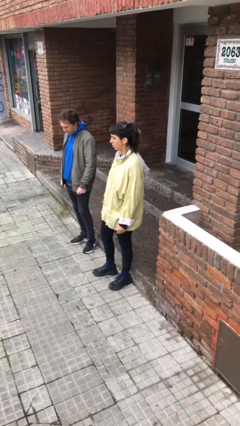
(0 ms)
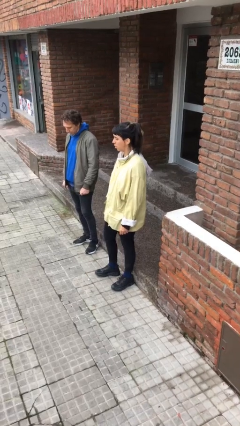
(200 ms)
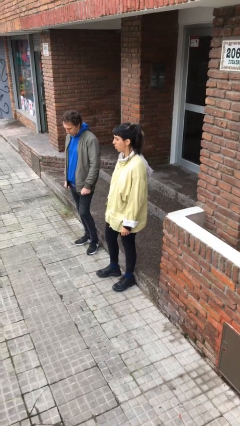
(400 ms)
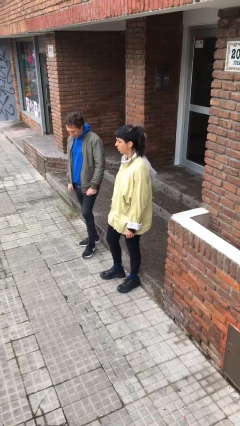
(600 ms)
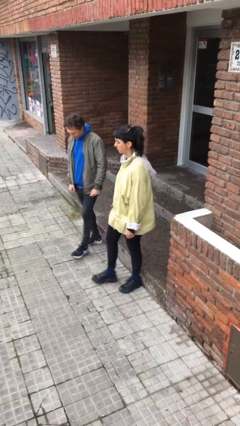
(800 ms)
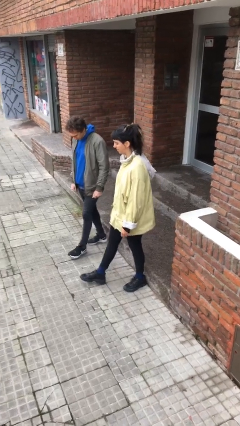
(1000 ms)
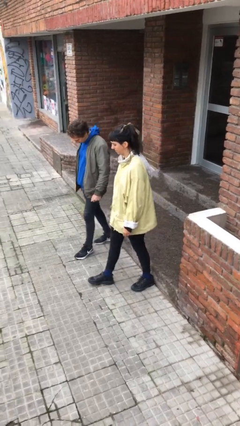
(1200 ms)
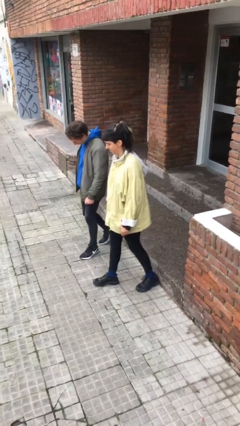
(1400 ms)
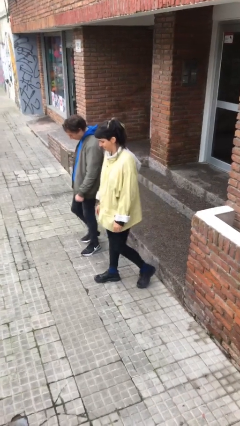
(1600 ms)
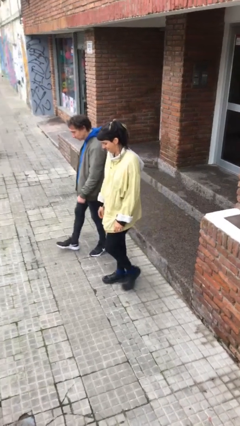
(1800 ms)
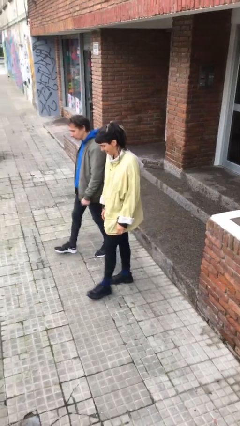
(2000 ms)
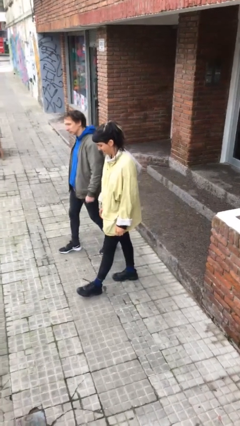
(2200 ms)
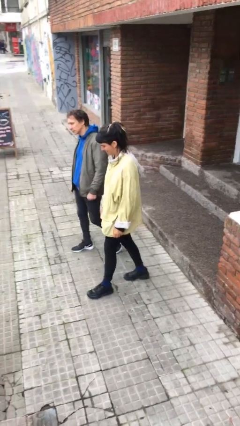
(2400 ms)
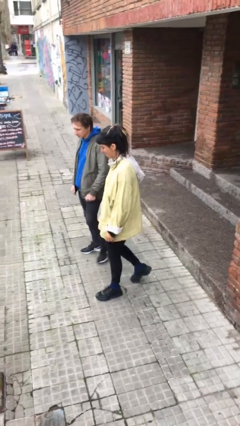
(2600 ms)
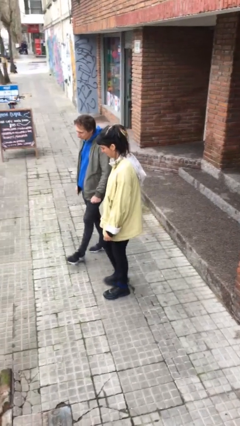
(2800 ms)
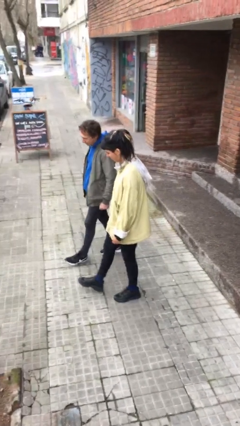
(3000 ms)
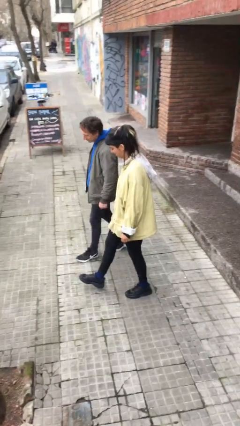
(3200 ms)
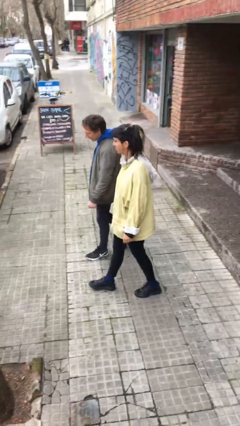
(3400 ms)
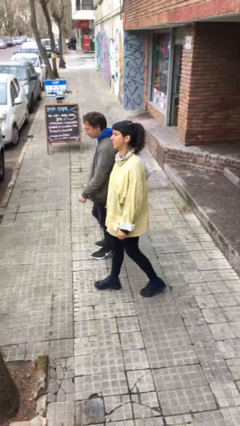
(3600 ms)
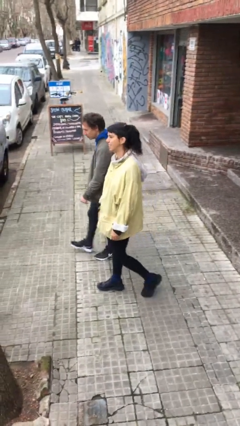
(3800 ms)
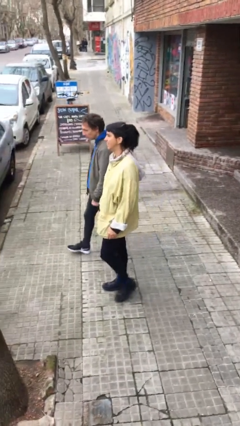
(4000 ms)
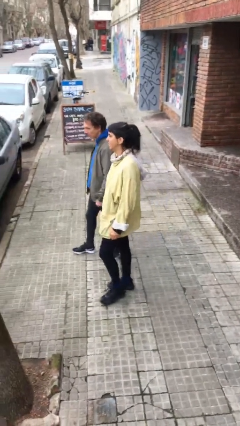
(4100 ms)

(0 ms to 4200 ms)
person talks to person

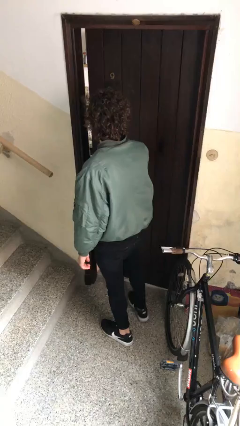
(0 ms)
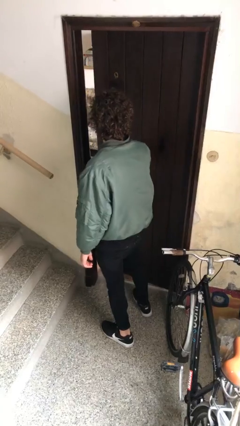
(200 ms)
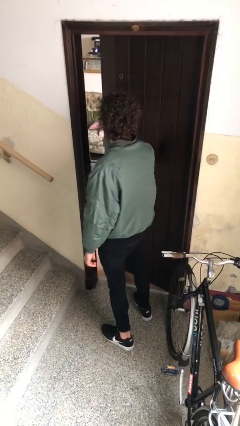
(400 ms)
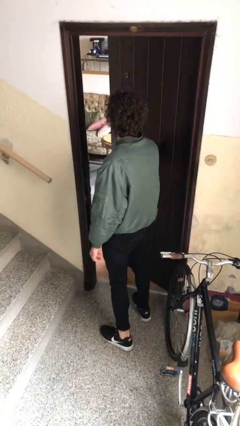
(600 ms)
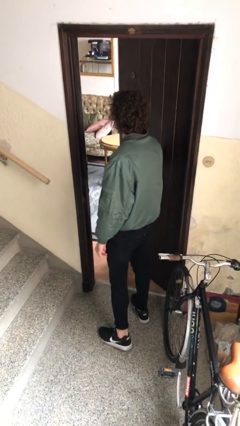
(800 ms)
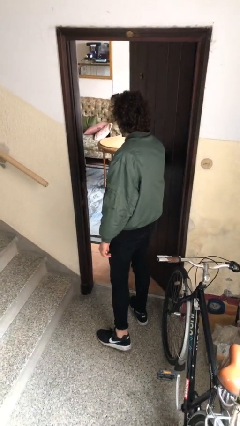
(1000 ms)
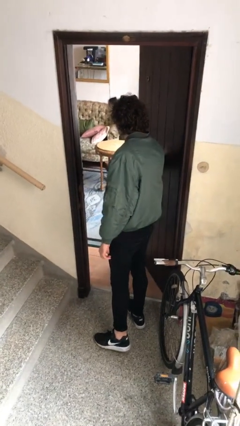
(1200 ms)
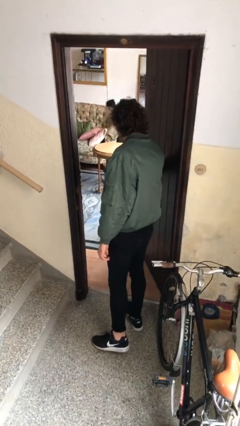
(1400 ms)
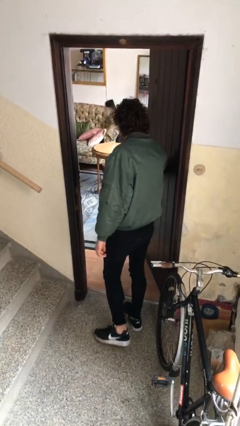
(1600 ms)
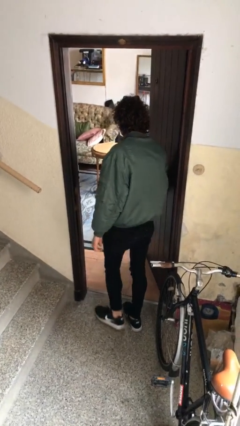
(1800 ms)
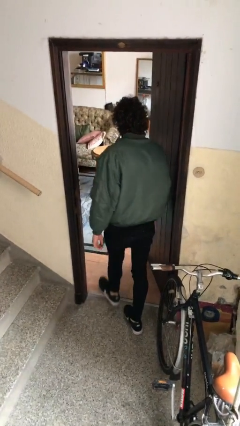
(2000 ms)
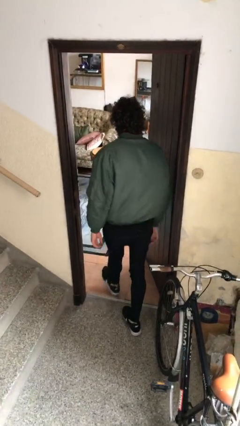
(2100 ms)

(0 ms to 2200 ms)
person opens facility door

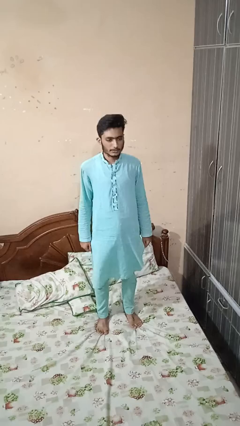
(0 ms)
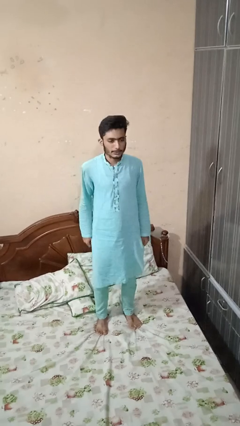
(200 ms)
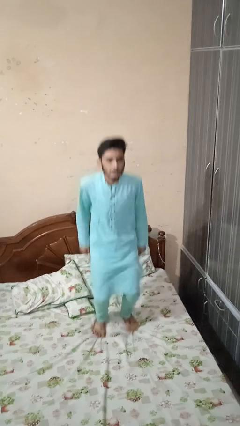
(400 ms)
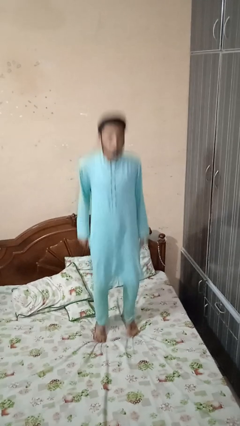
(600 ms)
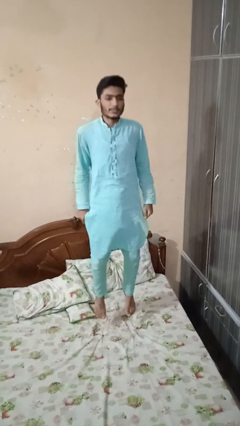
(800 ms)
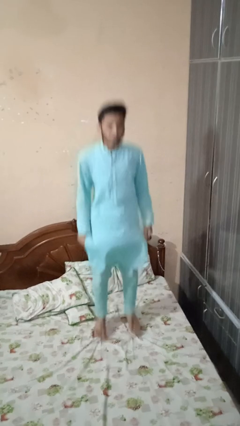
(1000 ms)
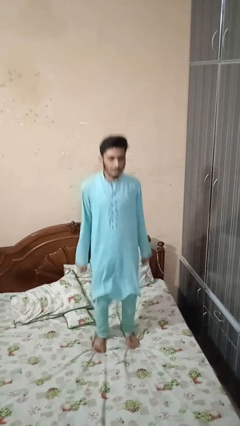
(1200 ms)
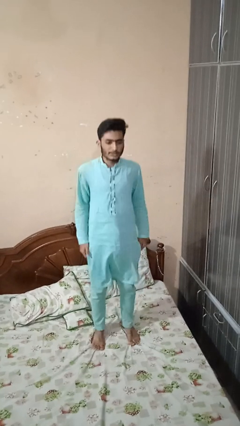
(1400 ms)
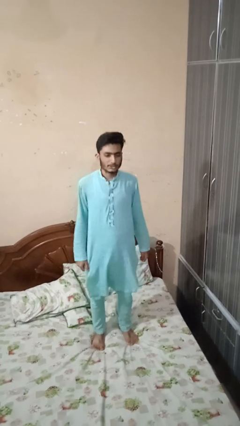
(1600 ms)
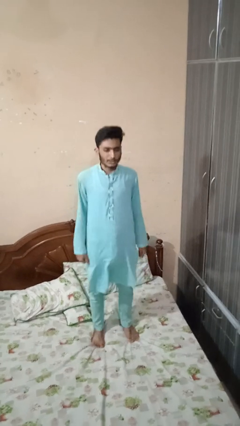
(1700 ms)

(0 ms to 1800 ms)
person jumps on bed

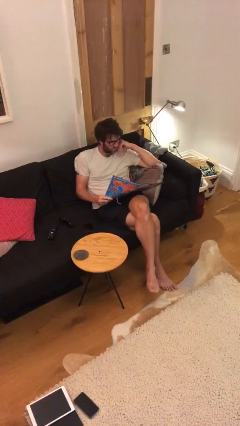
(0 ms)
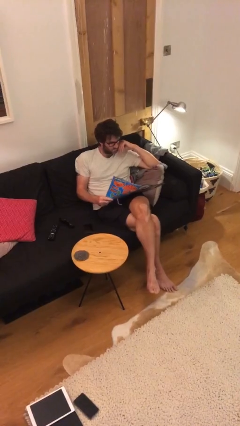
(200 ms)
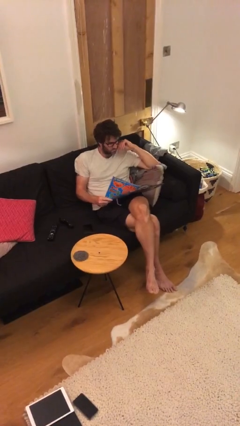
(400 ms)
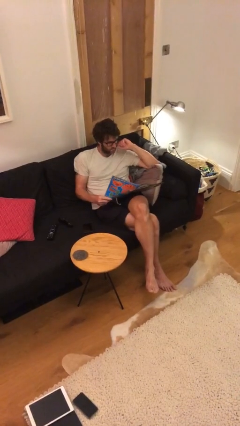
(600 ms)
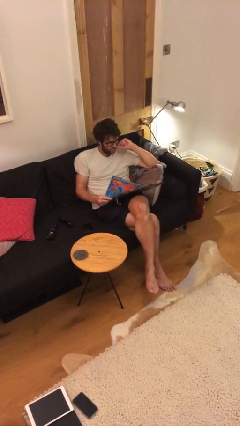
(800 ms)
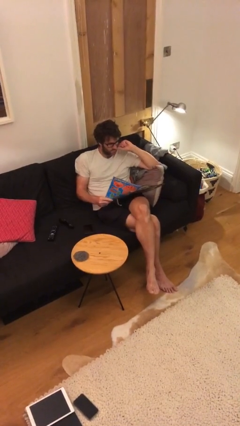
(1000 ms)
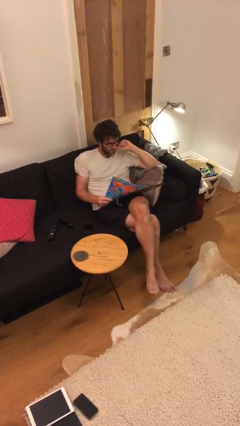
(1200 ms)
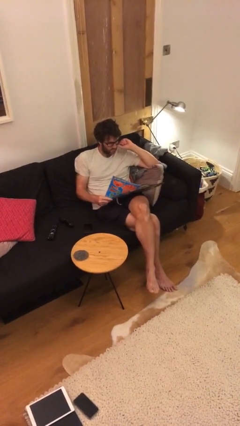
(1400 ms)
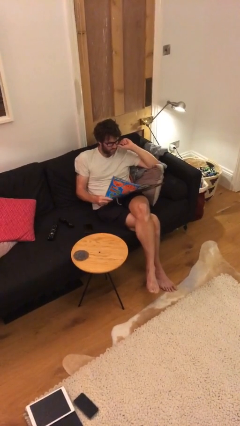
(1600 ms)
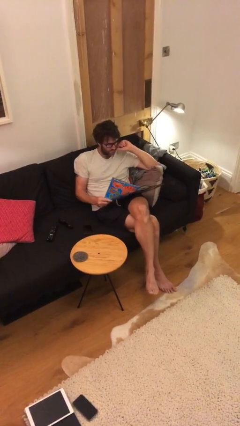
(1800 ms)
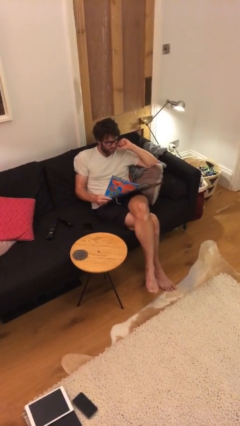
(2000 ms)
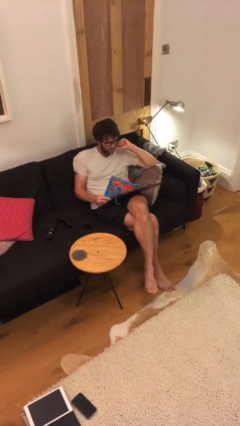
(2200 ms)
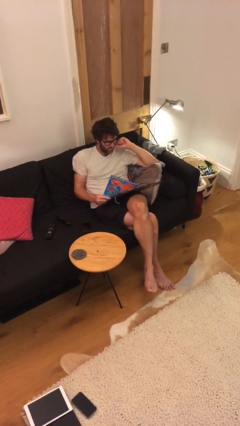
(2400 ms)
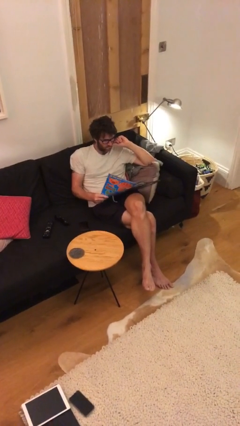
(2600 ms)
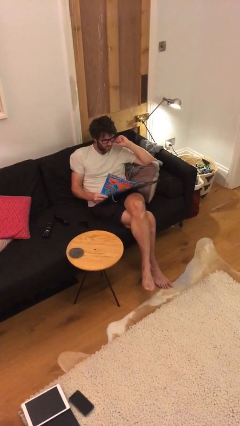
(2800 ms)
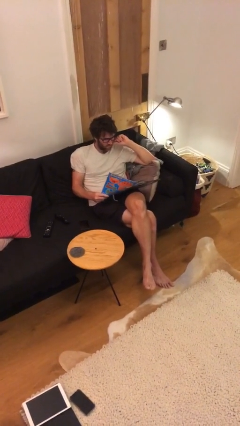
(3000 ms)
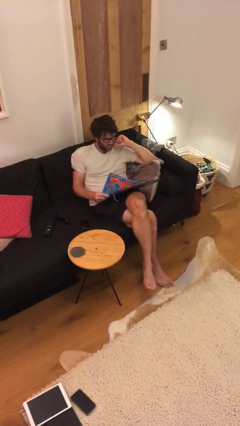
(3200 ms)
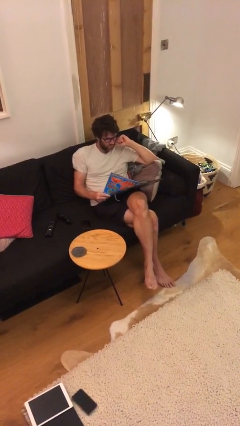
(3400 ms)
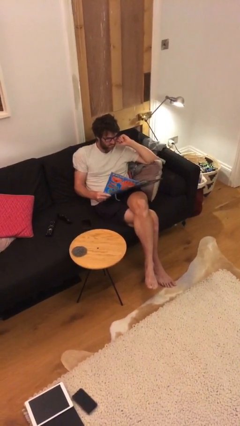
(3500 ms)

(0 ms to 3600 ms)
person reads document

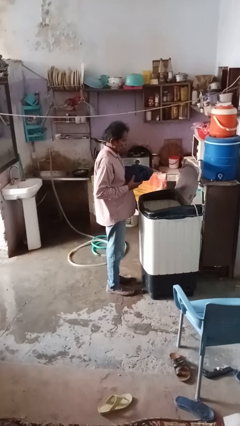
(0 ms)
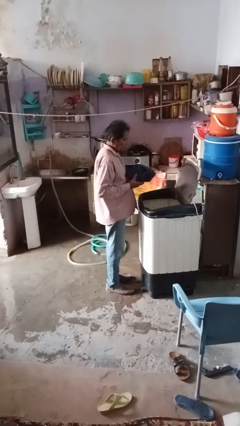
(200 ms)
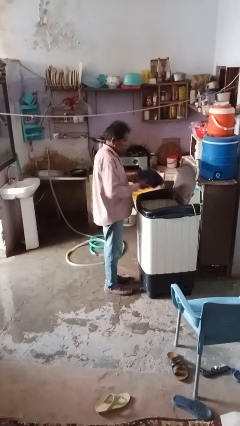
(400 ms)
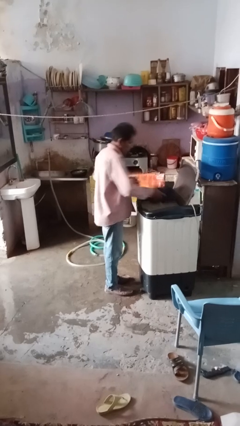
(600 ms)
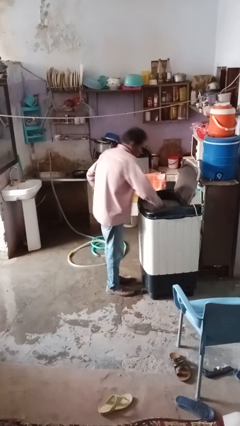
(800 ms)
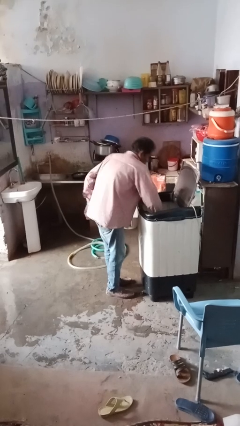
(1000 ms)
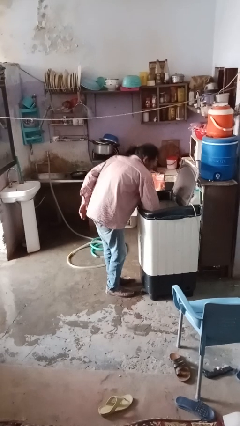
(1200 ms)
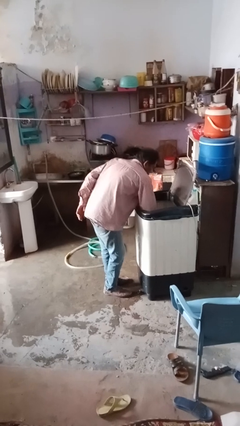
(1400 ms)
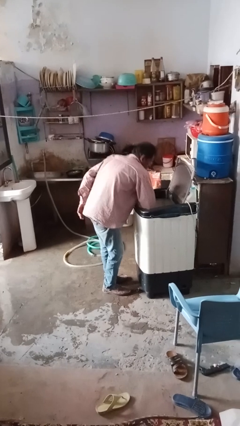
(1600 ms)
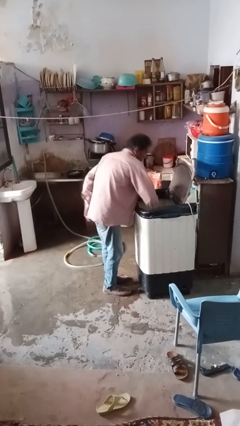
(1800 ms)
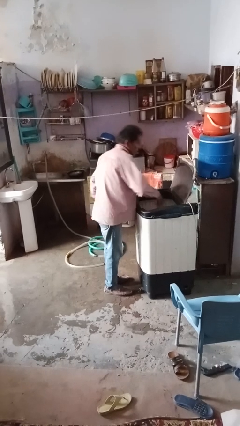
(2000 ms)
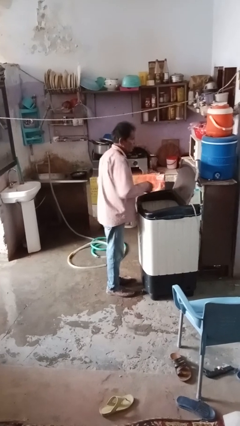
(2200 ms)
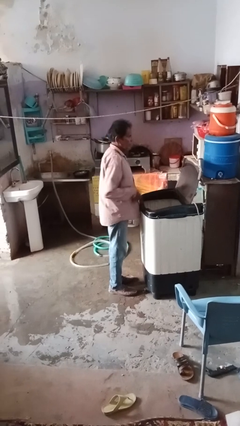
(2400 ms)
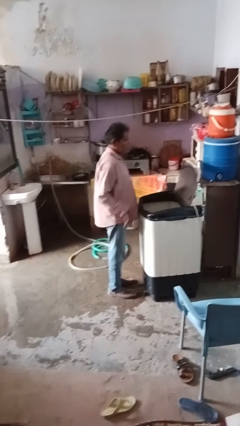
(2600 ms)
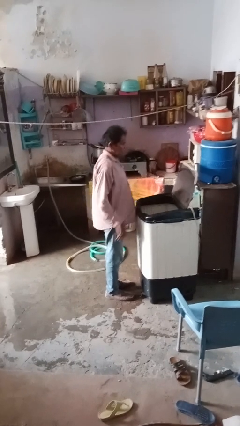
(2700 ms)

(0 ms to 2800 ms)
person loads clotheswasher

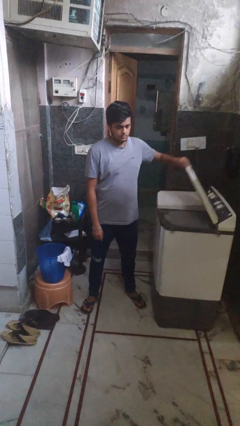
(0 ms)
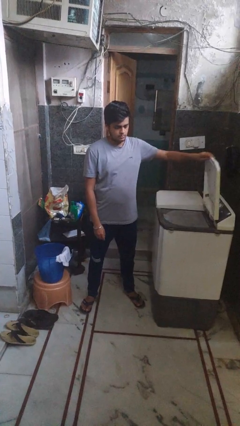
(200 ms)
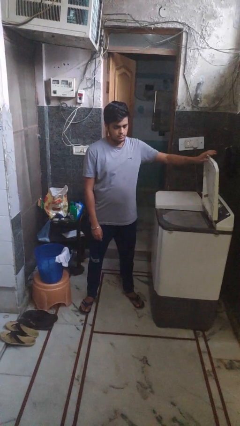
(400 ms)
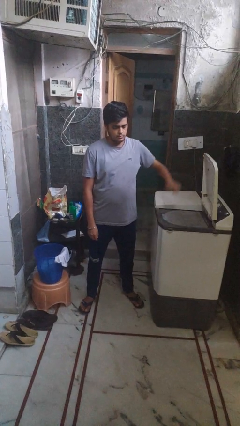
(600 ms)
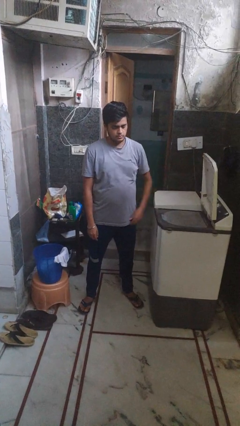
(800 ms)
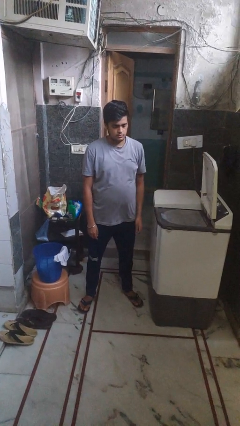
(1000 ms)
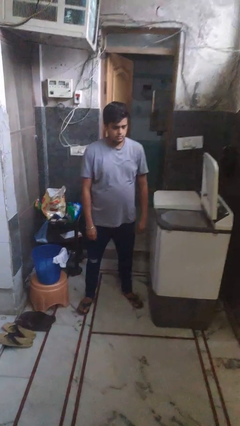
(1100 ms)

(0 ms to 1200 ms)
person opens clothes washer

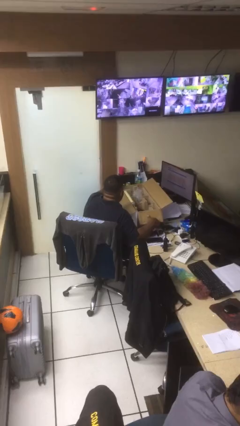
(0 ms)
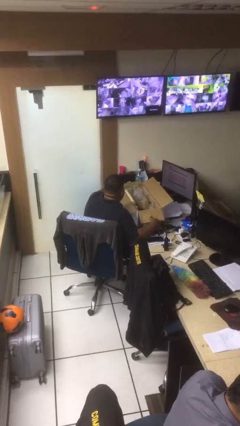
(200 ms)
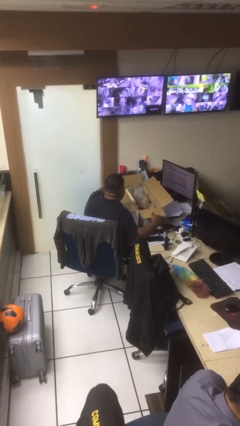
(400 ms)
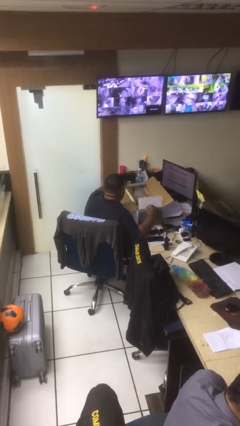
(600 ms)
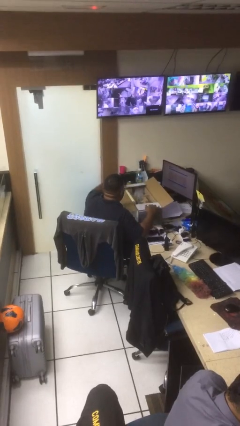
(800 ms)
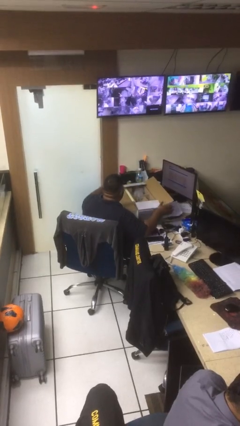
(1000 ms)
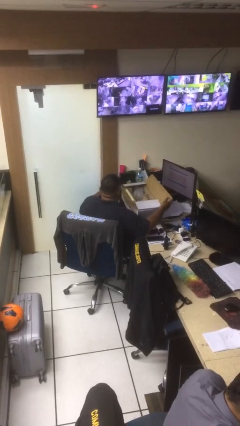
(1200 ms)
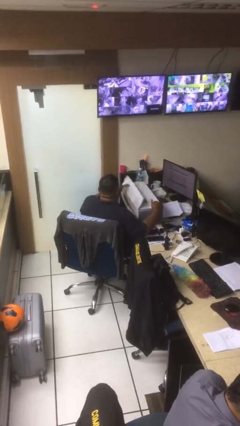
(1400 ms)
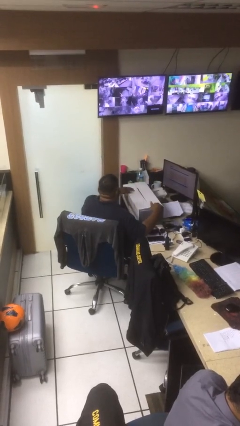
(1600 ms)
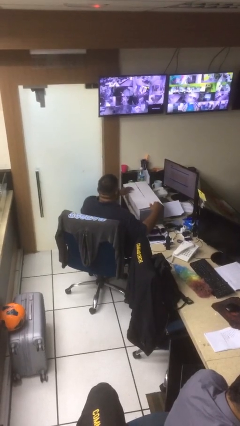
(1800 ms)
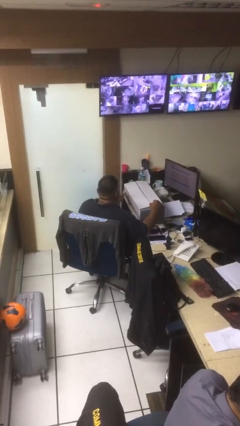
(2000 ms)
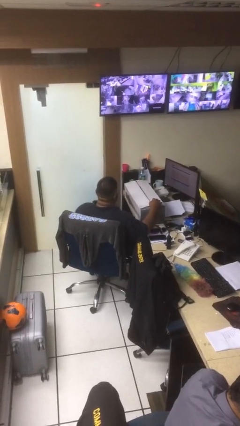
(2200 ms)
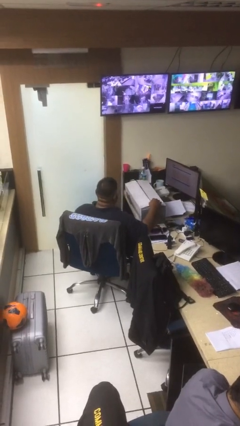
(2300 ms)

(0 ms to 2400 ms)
person closes box
